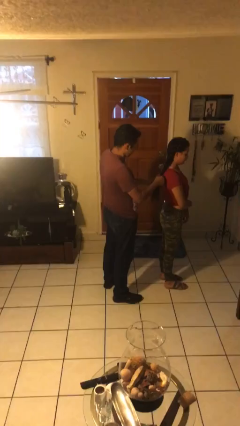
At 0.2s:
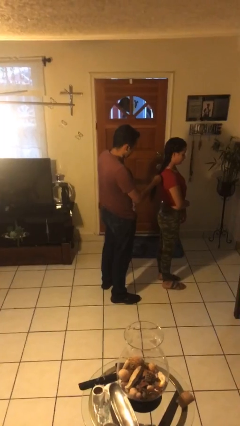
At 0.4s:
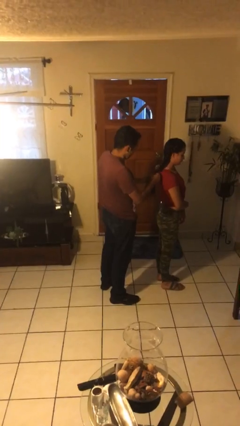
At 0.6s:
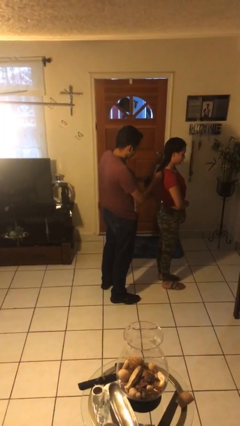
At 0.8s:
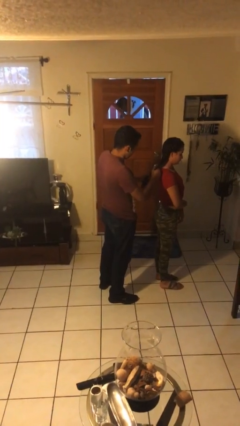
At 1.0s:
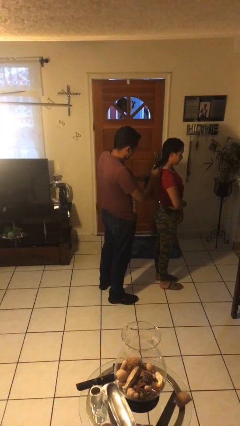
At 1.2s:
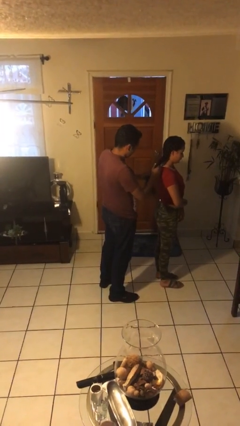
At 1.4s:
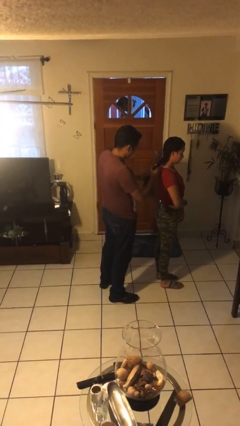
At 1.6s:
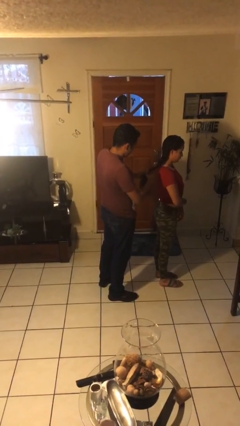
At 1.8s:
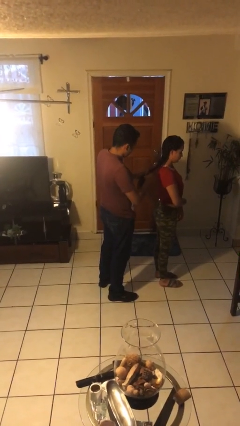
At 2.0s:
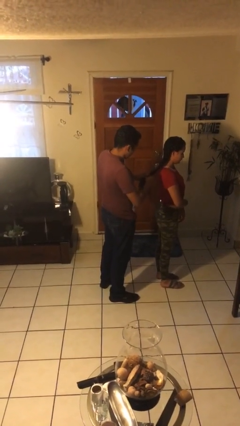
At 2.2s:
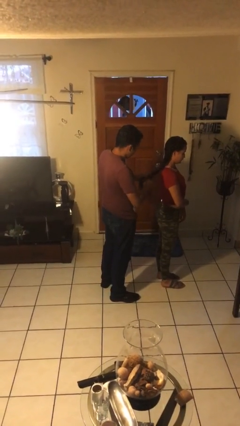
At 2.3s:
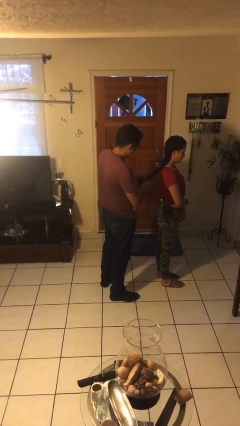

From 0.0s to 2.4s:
person braids hair of person

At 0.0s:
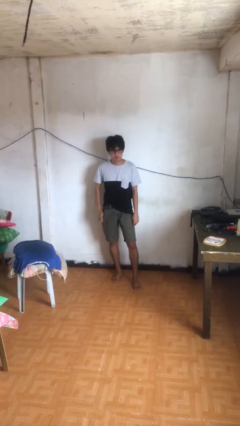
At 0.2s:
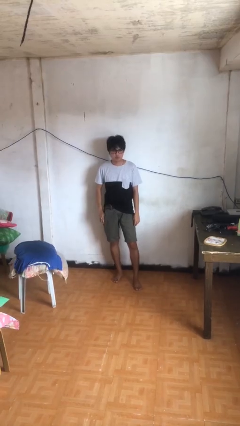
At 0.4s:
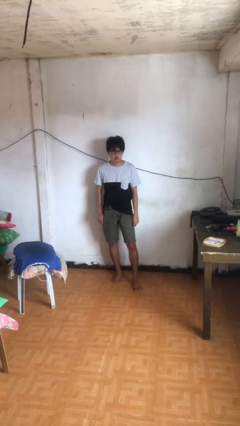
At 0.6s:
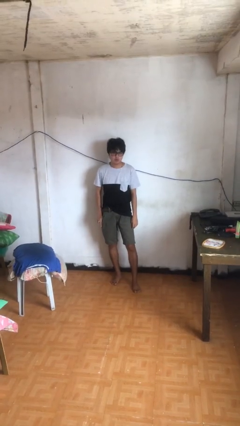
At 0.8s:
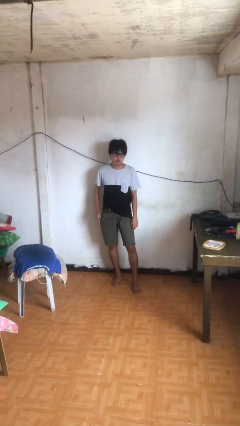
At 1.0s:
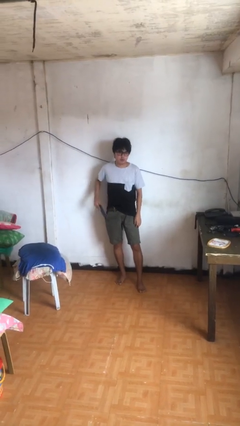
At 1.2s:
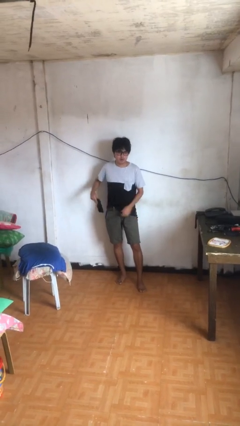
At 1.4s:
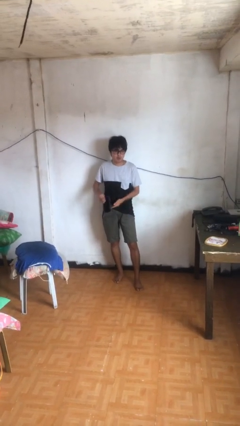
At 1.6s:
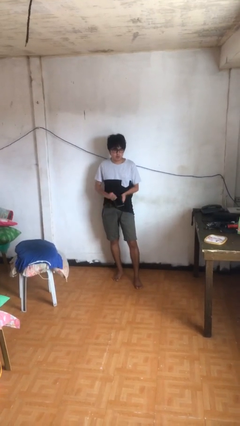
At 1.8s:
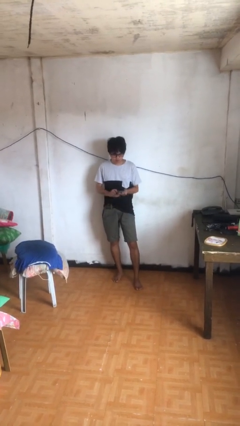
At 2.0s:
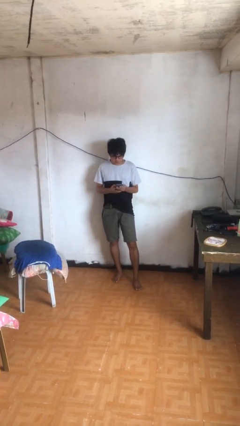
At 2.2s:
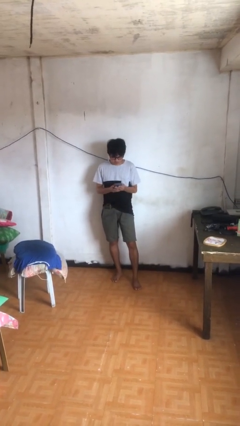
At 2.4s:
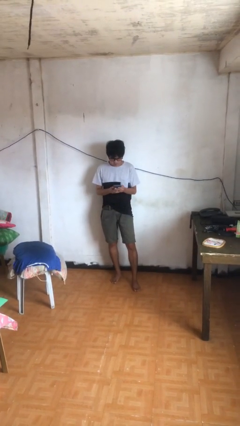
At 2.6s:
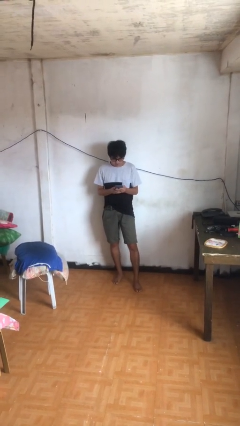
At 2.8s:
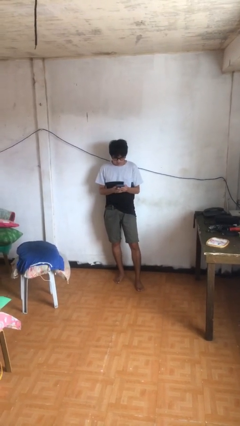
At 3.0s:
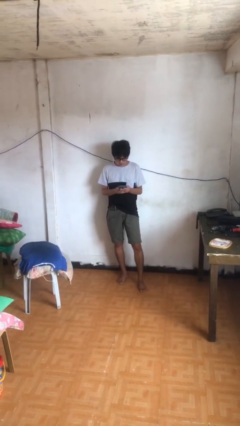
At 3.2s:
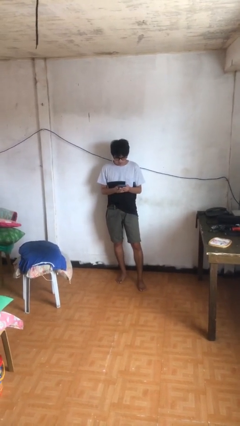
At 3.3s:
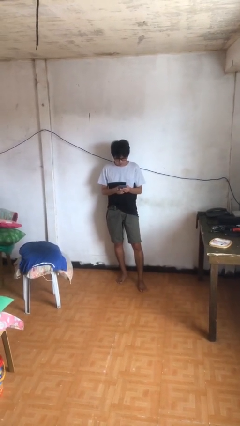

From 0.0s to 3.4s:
person takes phone from pocket

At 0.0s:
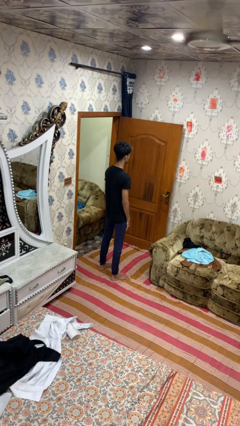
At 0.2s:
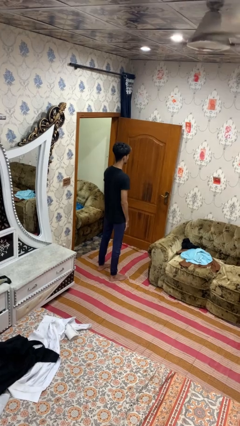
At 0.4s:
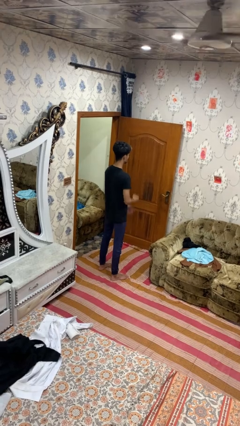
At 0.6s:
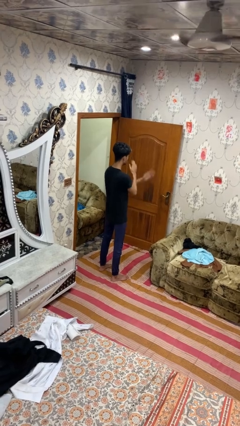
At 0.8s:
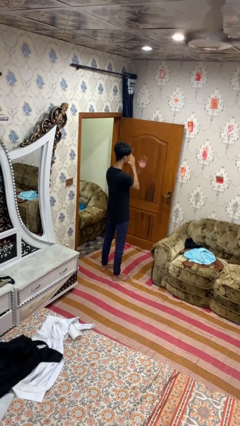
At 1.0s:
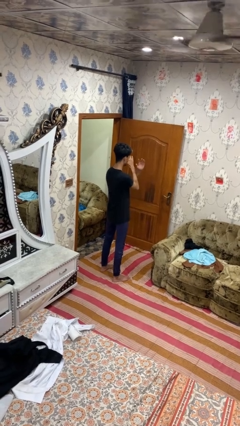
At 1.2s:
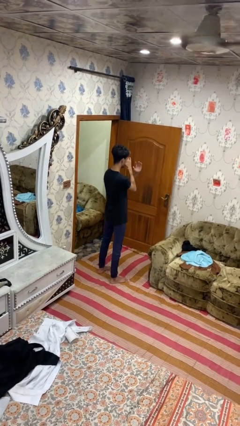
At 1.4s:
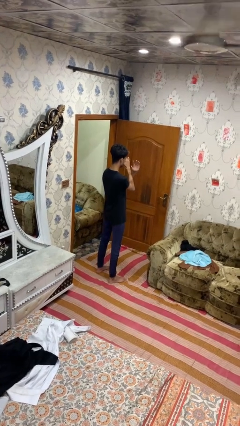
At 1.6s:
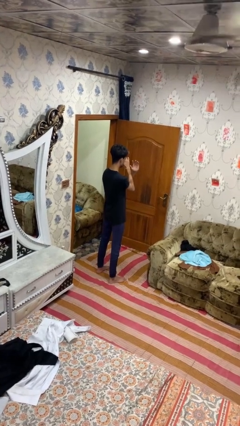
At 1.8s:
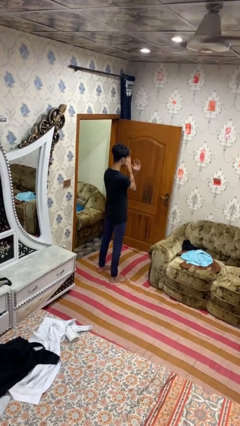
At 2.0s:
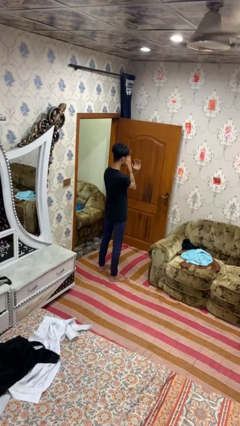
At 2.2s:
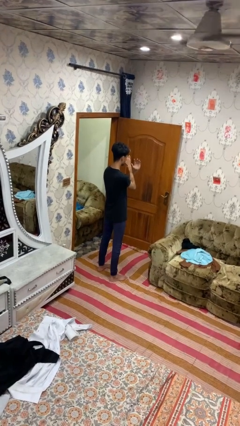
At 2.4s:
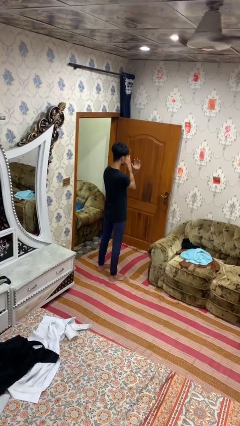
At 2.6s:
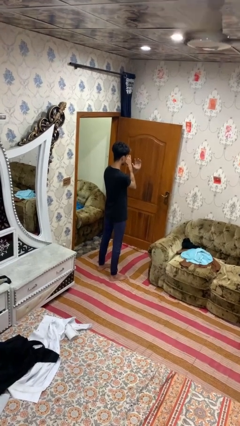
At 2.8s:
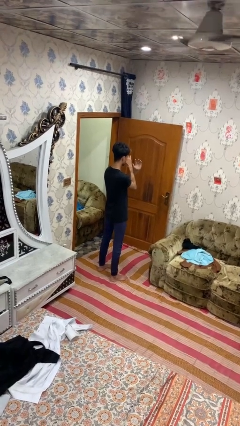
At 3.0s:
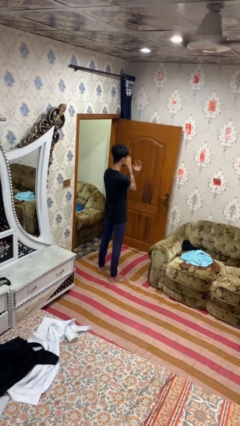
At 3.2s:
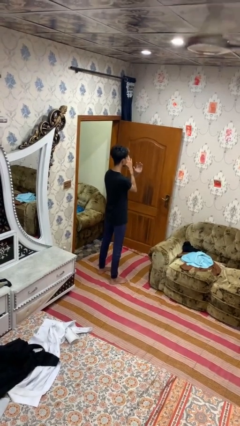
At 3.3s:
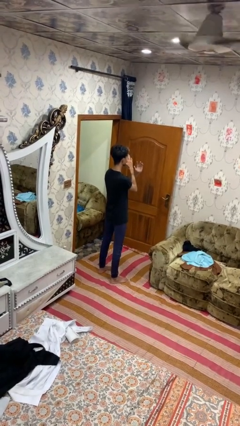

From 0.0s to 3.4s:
person gestures arms x

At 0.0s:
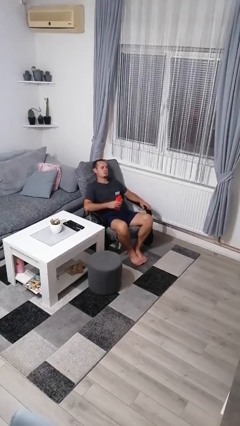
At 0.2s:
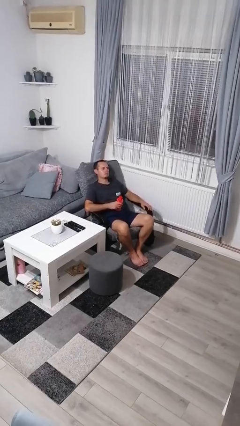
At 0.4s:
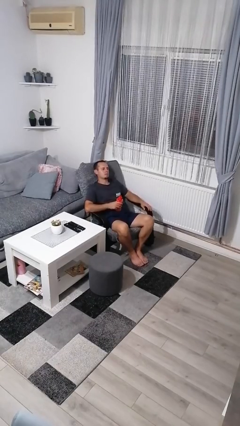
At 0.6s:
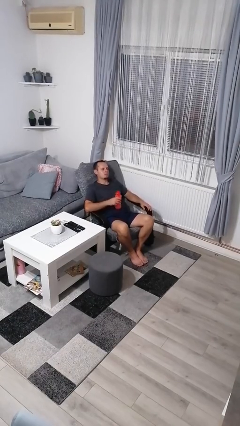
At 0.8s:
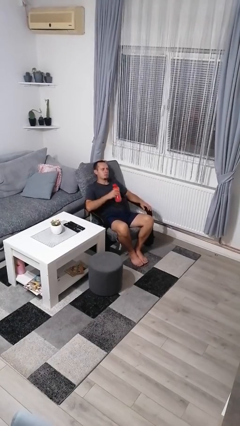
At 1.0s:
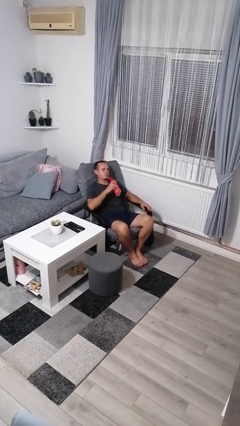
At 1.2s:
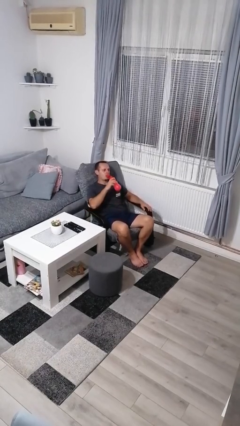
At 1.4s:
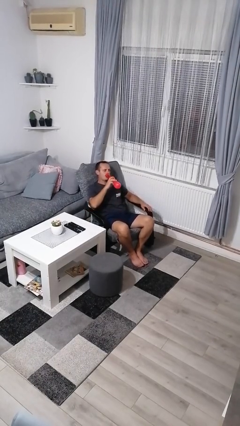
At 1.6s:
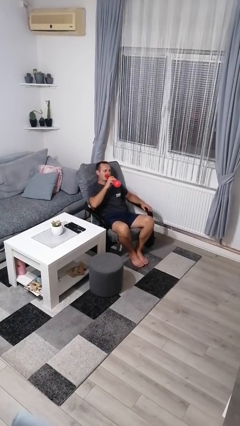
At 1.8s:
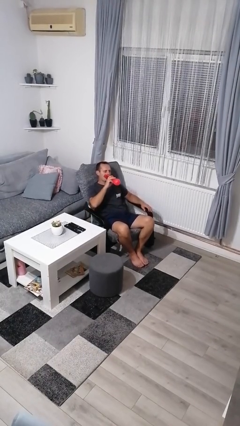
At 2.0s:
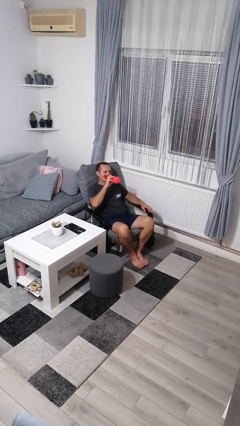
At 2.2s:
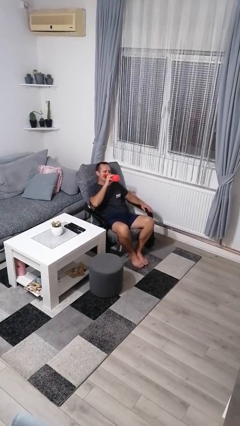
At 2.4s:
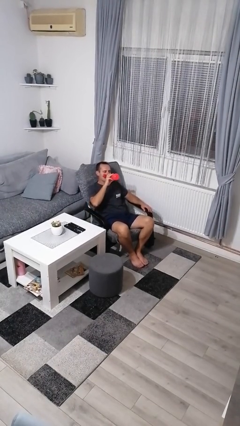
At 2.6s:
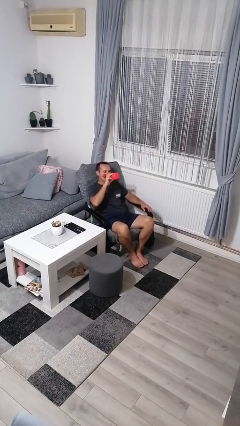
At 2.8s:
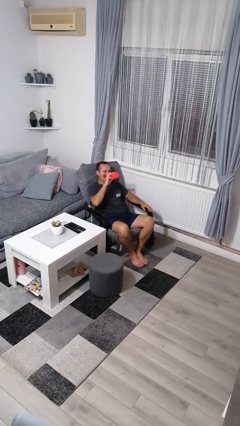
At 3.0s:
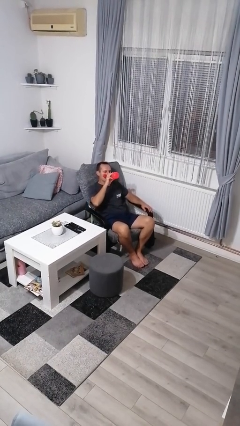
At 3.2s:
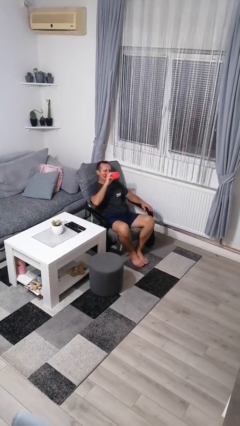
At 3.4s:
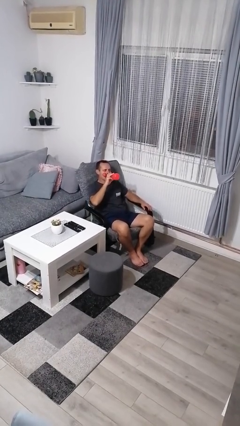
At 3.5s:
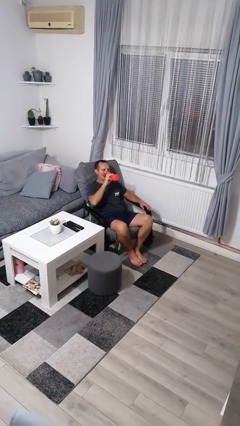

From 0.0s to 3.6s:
person drinks from bottle

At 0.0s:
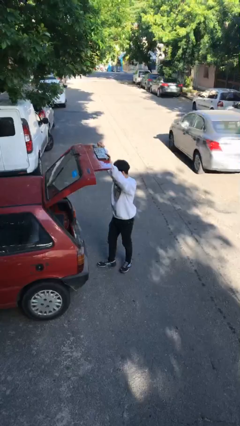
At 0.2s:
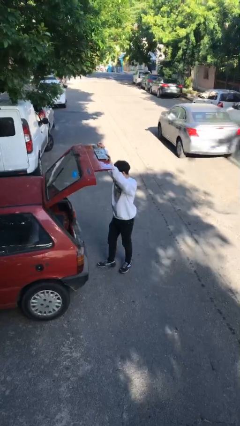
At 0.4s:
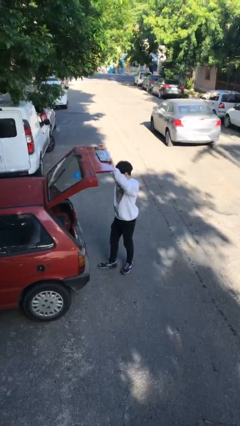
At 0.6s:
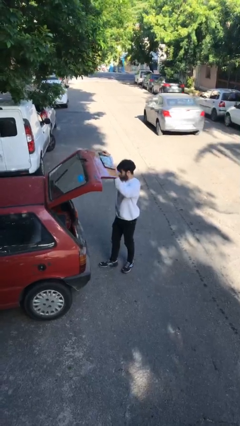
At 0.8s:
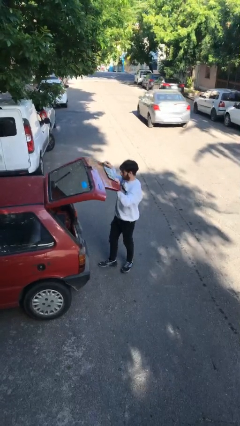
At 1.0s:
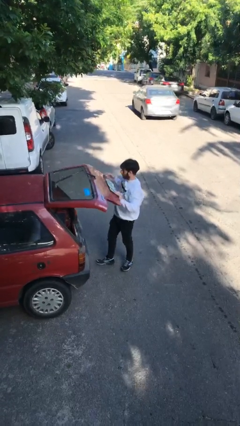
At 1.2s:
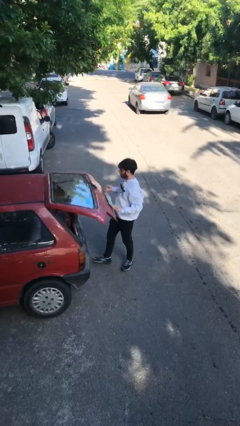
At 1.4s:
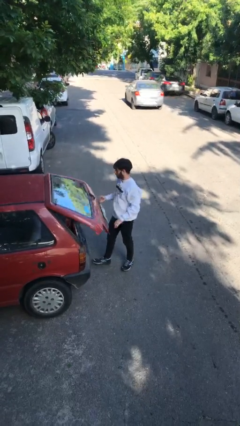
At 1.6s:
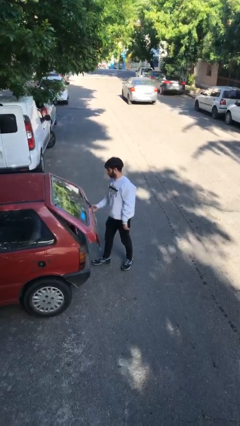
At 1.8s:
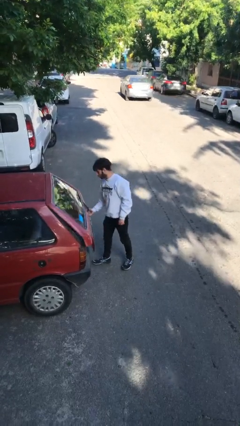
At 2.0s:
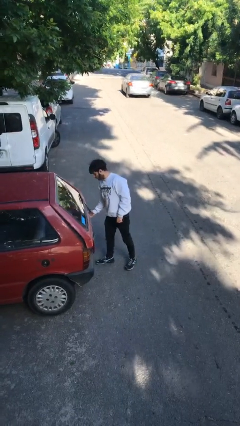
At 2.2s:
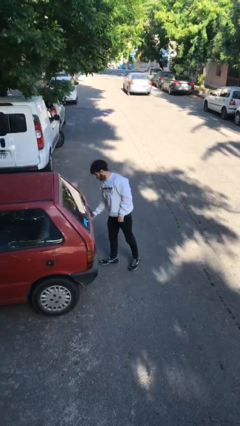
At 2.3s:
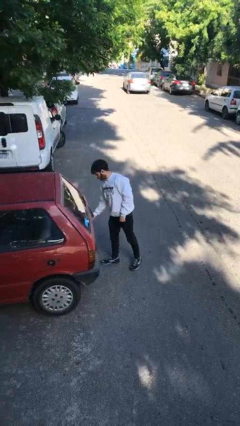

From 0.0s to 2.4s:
person closes car trunk

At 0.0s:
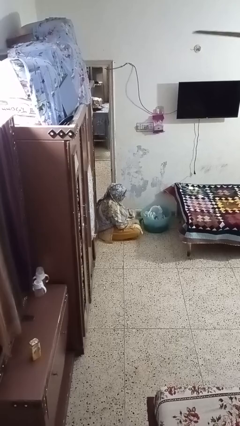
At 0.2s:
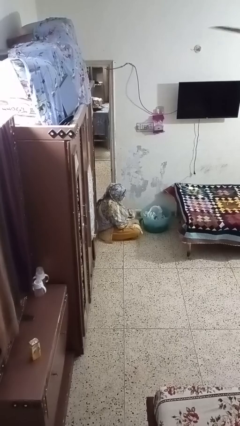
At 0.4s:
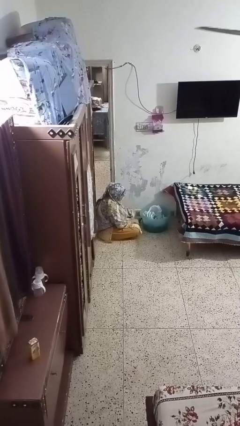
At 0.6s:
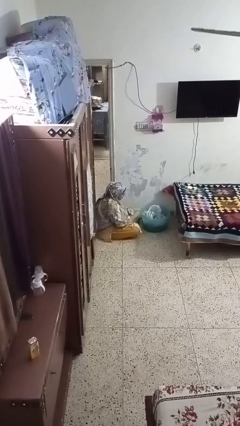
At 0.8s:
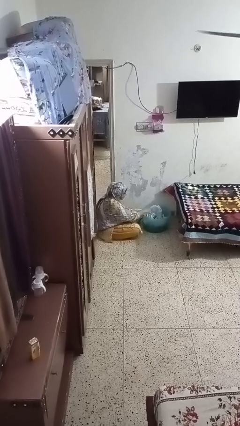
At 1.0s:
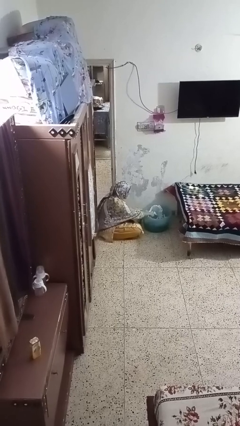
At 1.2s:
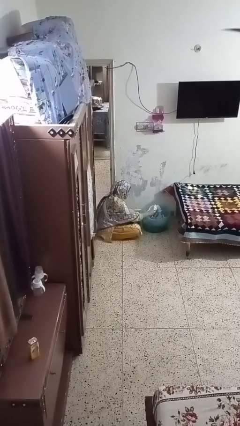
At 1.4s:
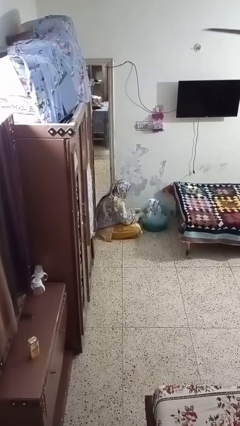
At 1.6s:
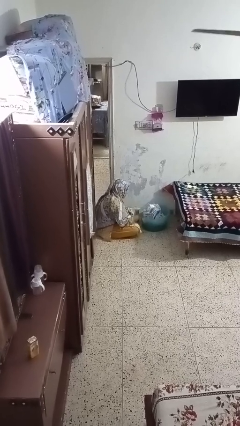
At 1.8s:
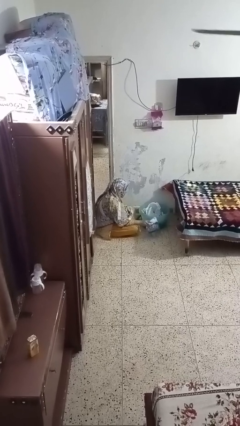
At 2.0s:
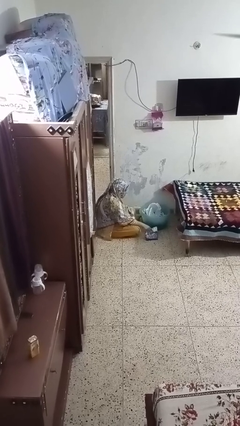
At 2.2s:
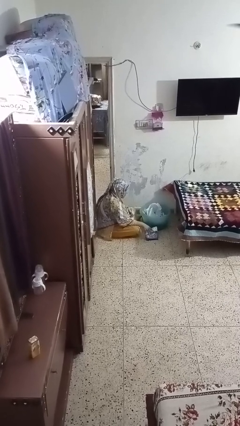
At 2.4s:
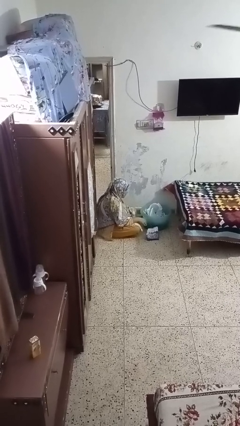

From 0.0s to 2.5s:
person takes object from basket
